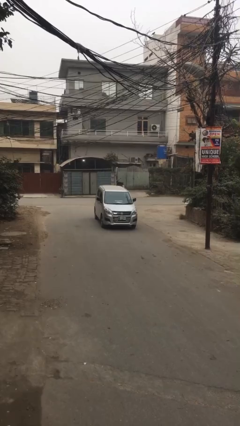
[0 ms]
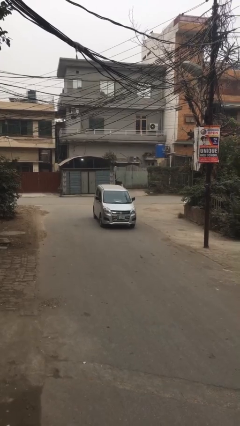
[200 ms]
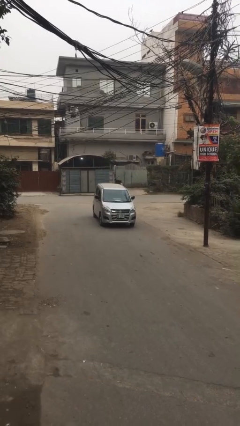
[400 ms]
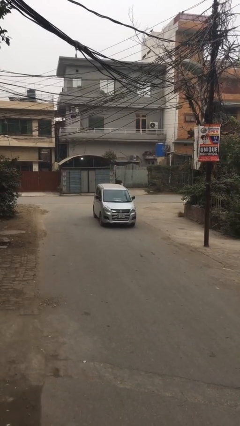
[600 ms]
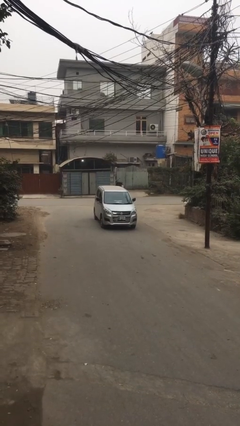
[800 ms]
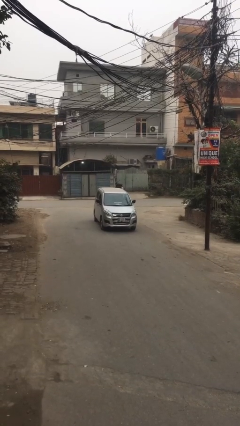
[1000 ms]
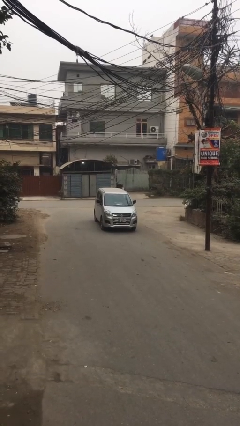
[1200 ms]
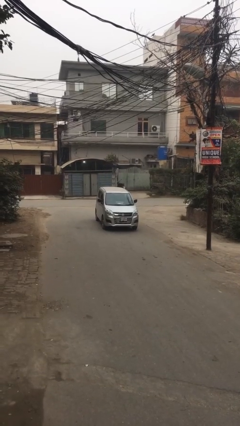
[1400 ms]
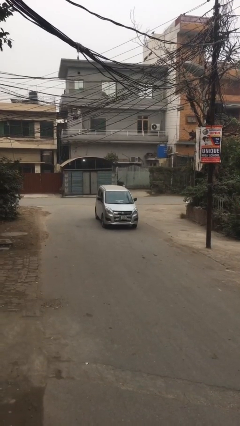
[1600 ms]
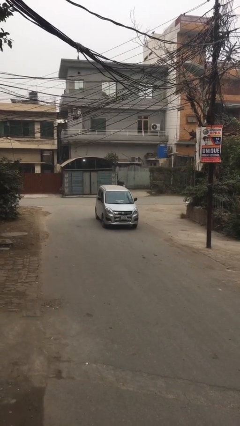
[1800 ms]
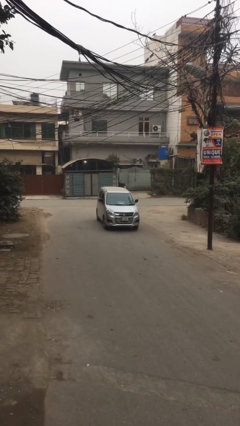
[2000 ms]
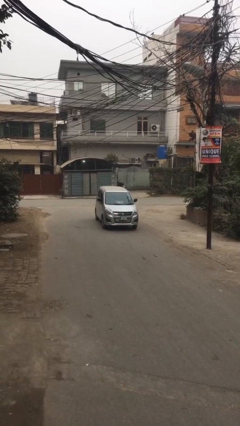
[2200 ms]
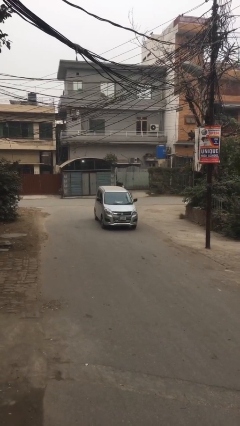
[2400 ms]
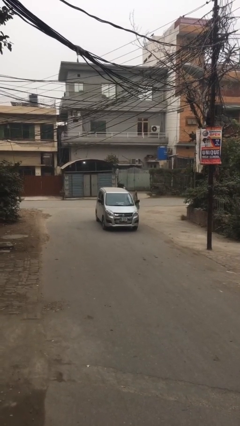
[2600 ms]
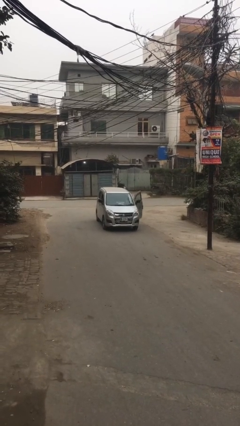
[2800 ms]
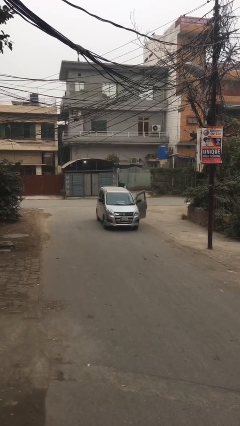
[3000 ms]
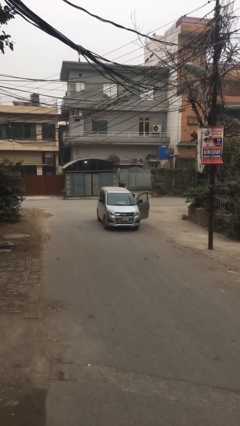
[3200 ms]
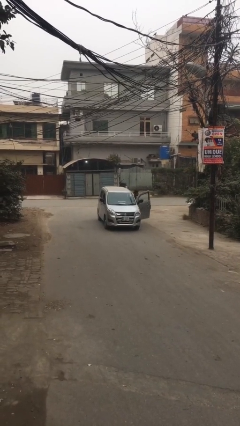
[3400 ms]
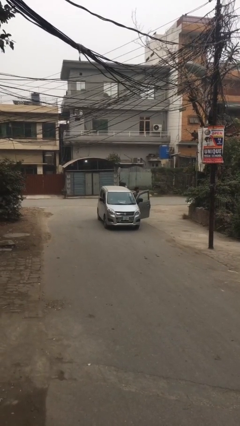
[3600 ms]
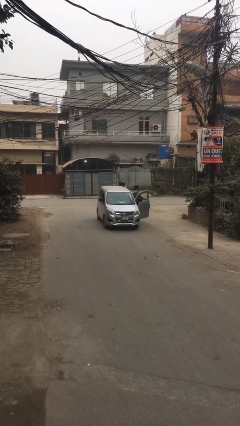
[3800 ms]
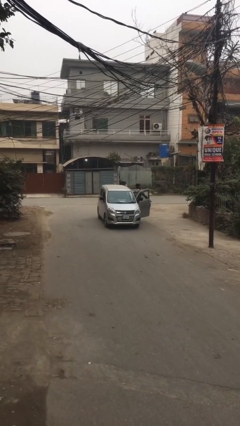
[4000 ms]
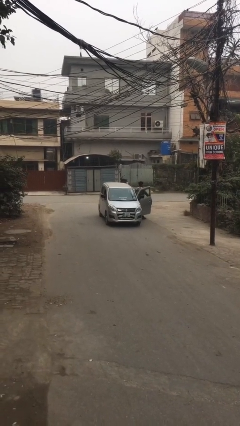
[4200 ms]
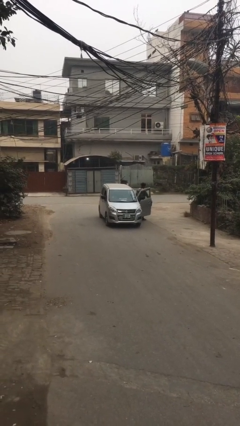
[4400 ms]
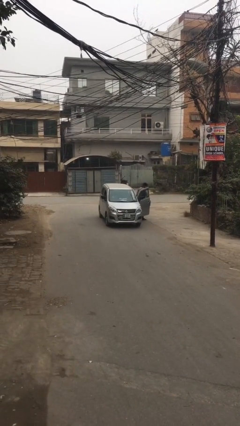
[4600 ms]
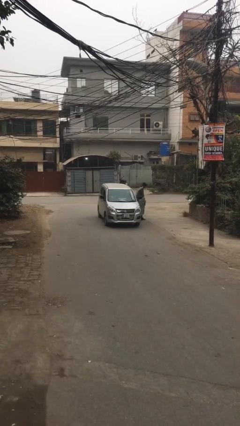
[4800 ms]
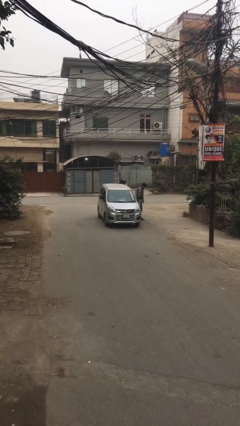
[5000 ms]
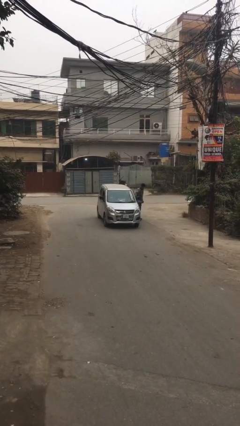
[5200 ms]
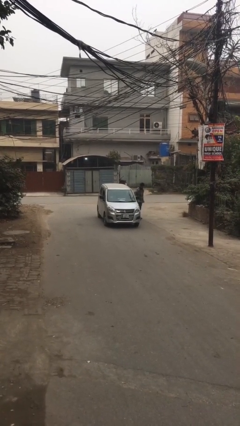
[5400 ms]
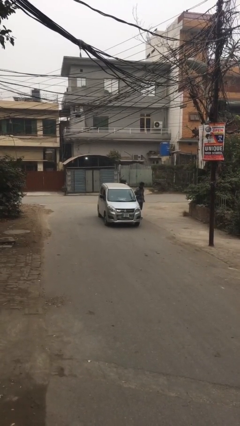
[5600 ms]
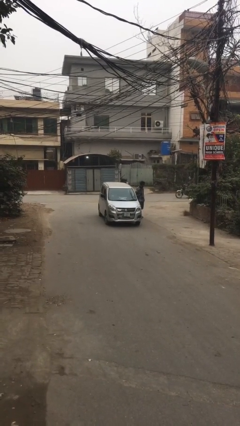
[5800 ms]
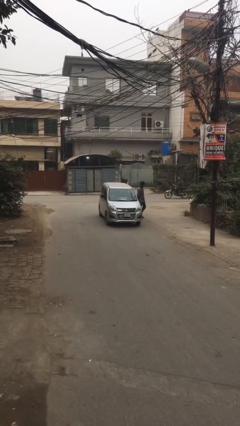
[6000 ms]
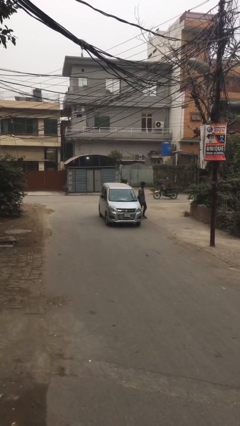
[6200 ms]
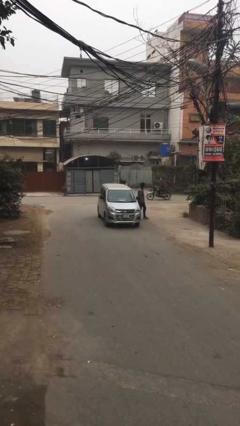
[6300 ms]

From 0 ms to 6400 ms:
car drops off person

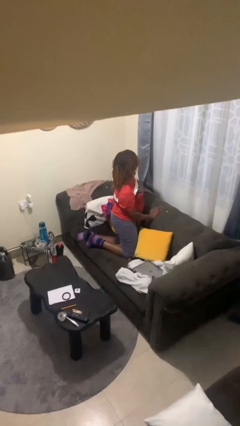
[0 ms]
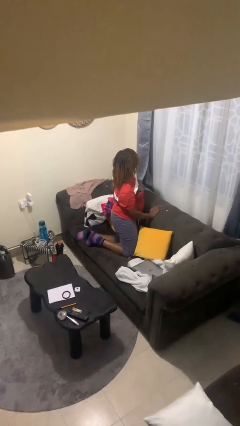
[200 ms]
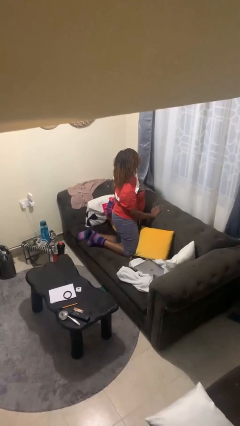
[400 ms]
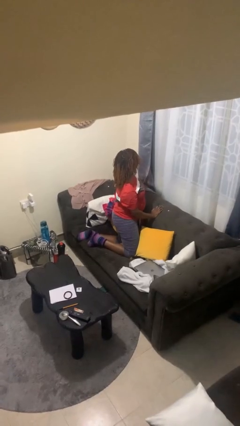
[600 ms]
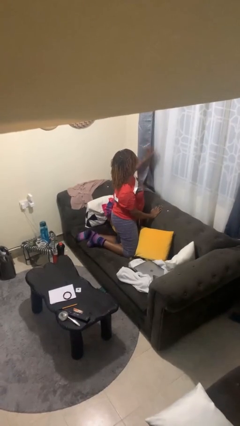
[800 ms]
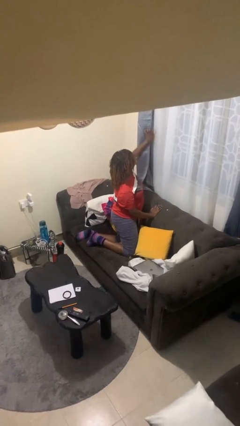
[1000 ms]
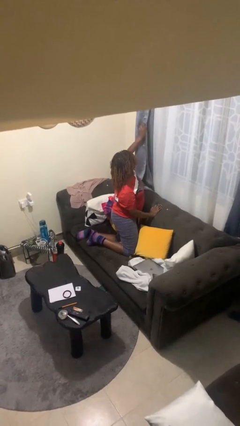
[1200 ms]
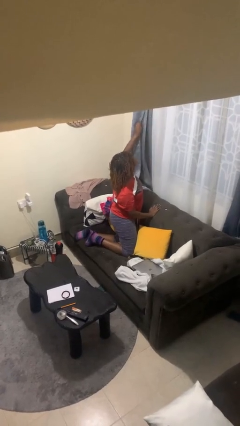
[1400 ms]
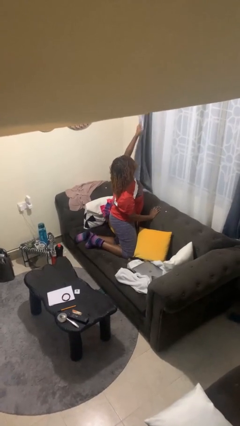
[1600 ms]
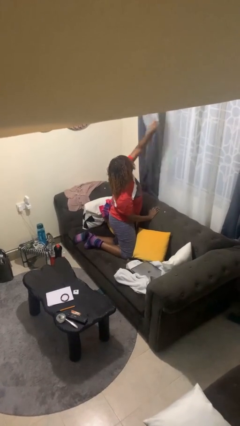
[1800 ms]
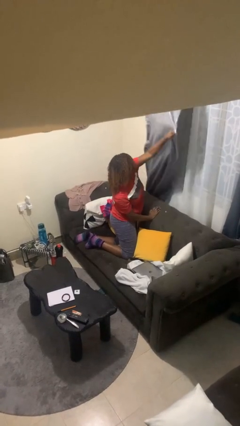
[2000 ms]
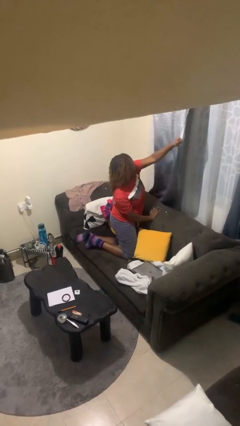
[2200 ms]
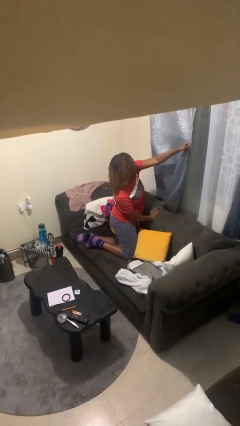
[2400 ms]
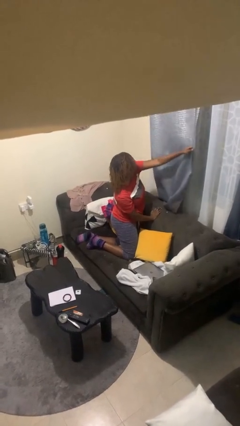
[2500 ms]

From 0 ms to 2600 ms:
person closes curtains

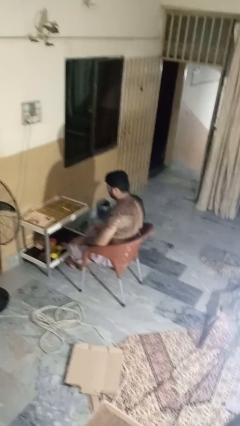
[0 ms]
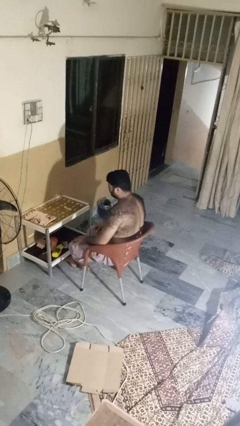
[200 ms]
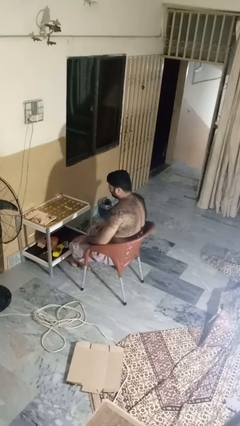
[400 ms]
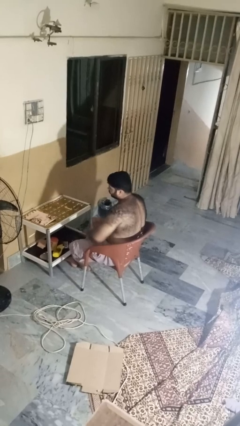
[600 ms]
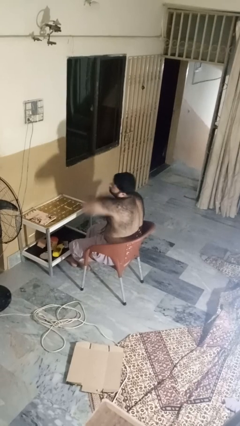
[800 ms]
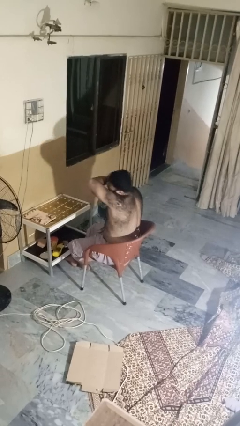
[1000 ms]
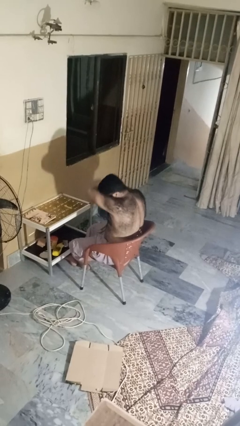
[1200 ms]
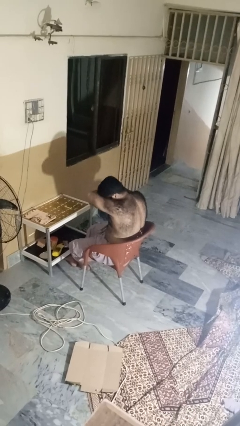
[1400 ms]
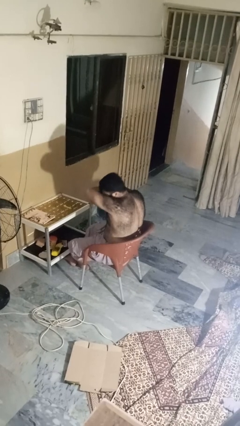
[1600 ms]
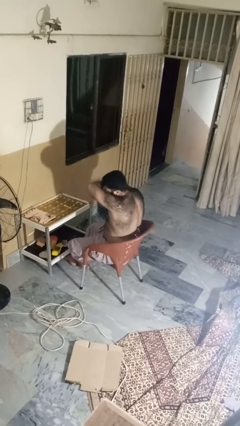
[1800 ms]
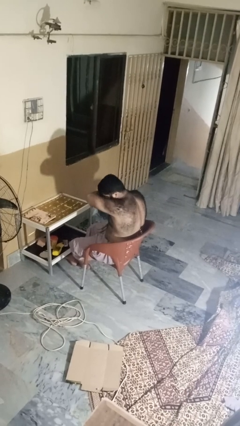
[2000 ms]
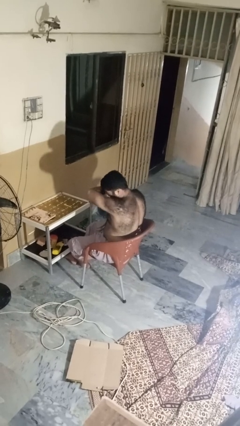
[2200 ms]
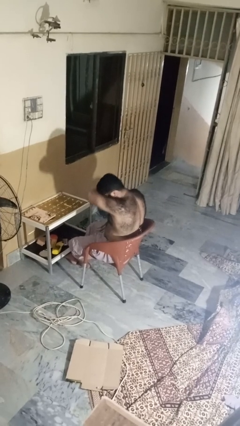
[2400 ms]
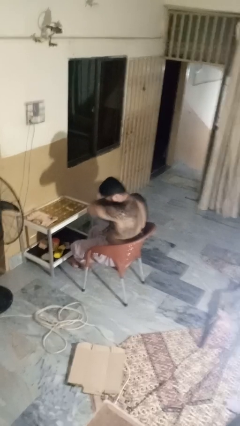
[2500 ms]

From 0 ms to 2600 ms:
person sneezes into arm

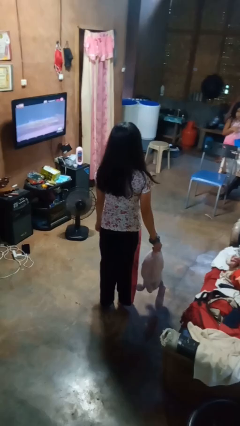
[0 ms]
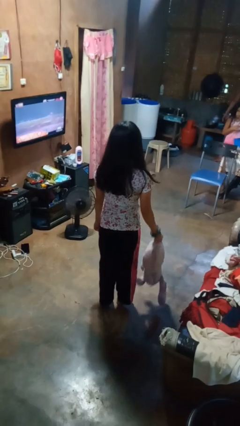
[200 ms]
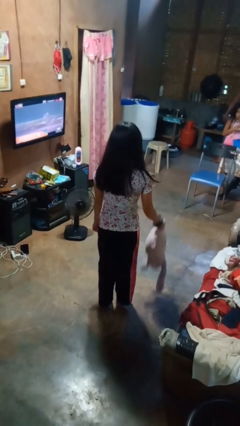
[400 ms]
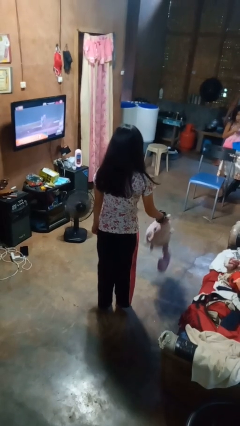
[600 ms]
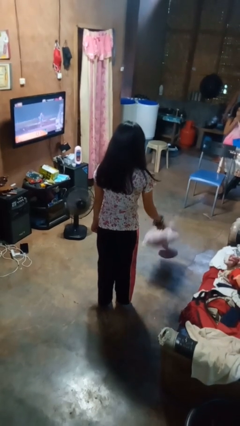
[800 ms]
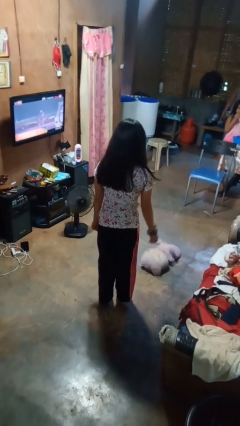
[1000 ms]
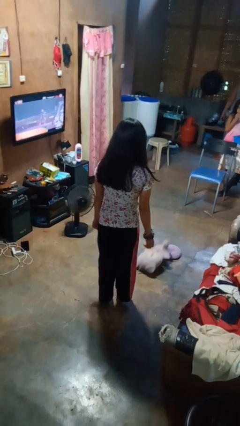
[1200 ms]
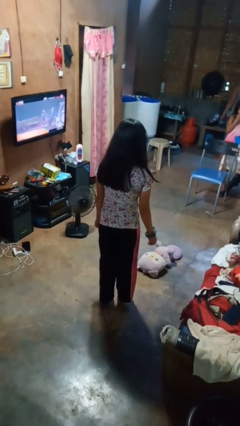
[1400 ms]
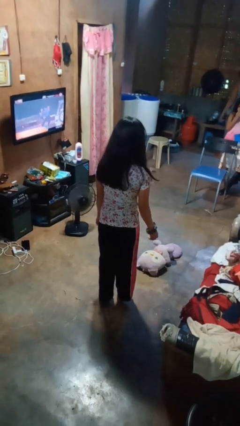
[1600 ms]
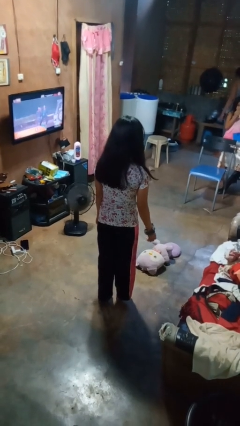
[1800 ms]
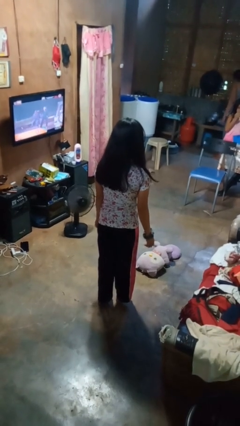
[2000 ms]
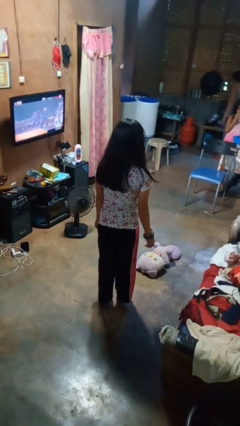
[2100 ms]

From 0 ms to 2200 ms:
person throws object to ground

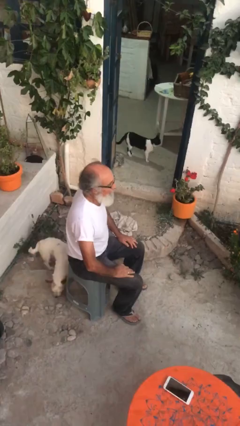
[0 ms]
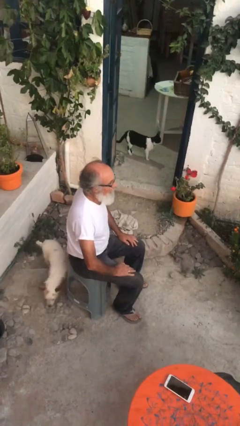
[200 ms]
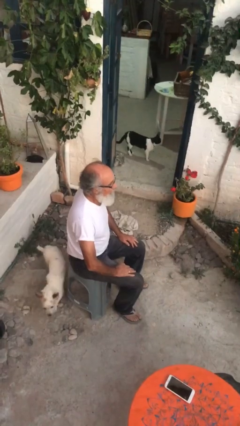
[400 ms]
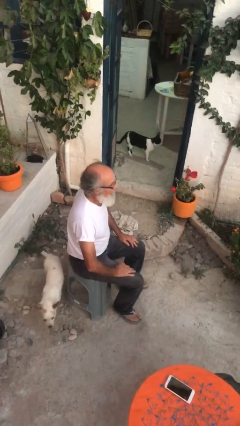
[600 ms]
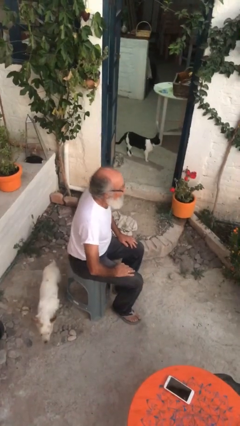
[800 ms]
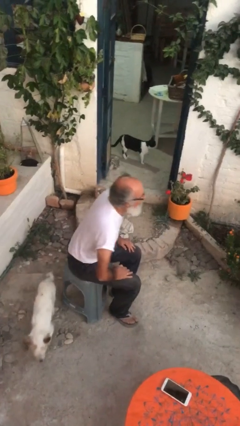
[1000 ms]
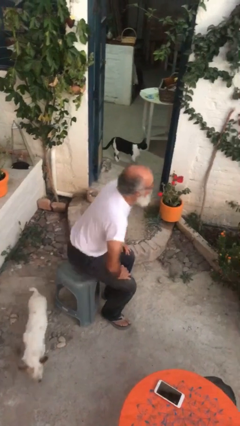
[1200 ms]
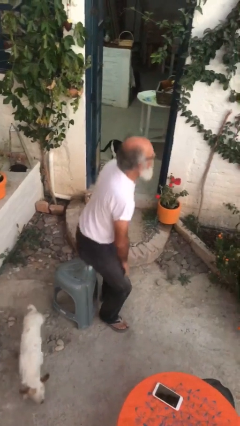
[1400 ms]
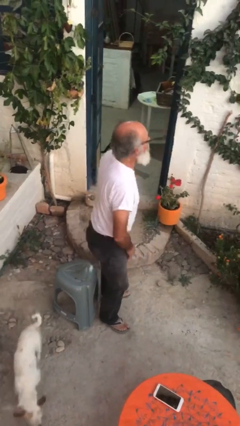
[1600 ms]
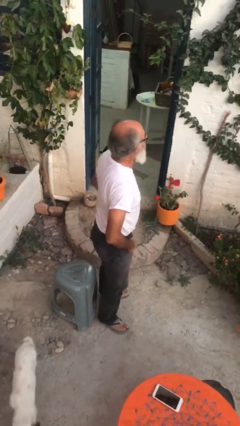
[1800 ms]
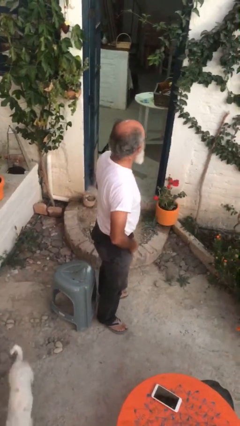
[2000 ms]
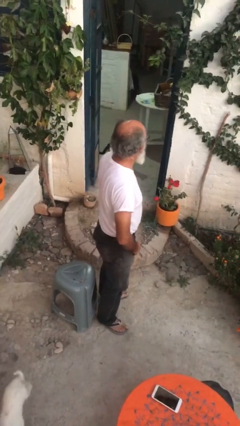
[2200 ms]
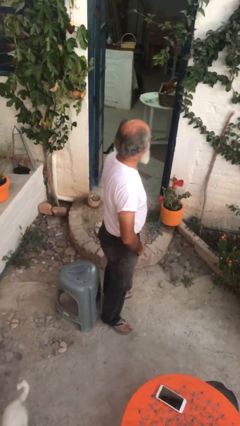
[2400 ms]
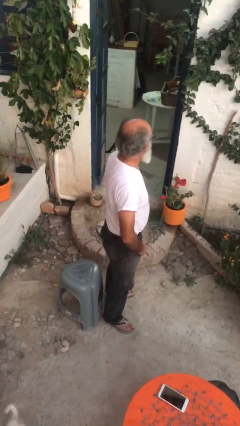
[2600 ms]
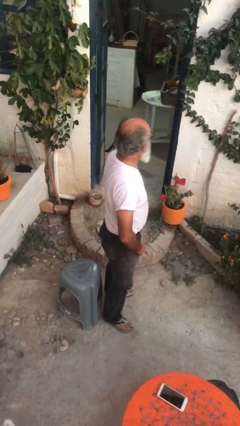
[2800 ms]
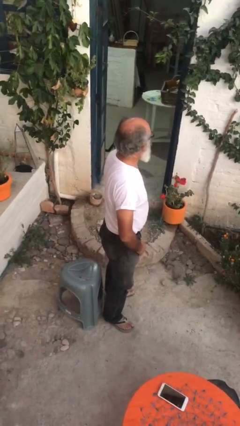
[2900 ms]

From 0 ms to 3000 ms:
person stands up

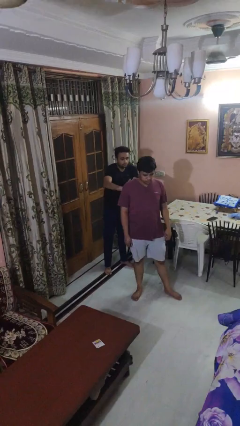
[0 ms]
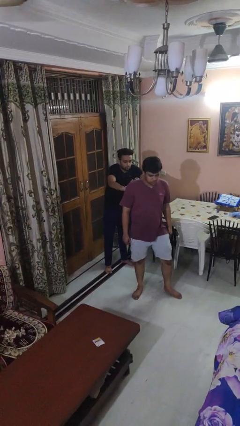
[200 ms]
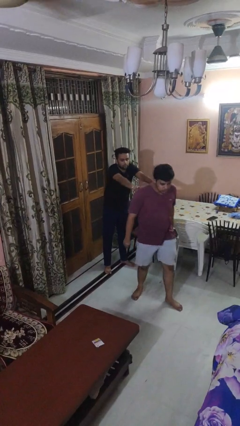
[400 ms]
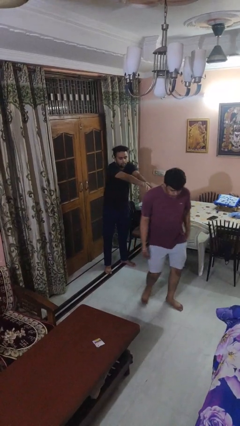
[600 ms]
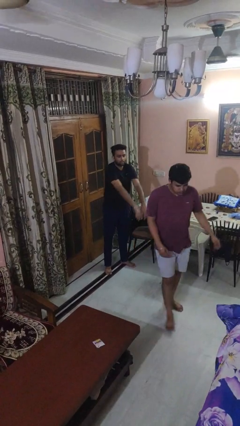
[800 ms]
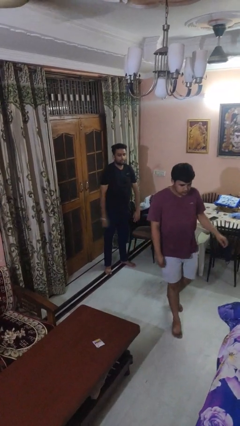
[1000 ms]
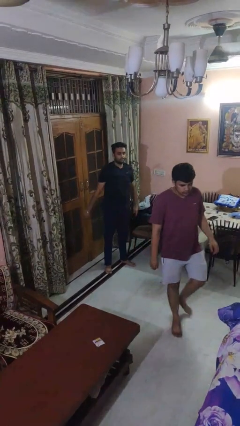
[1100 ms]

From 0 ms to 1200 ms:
person shoves person
